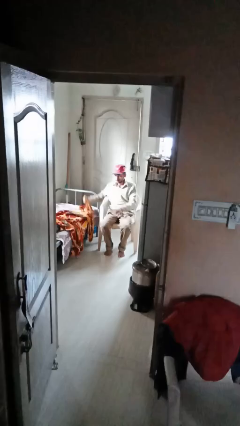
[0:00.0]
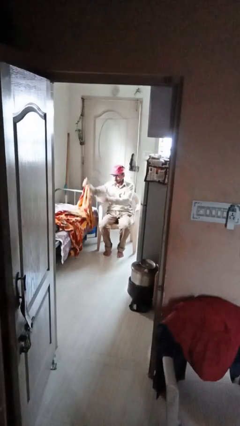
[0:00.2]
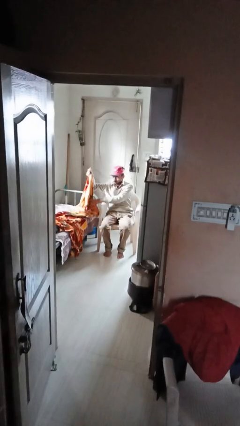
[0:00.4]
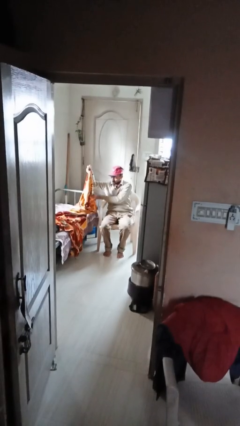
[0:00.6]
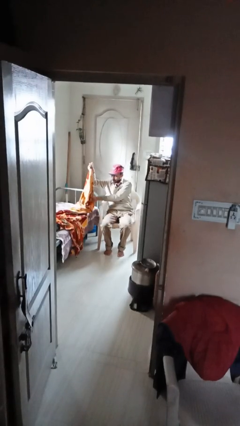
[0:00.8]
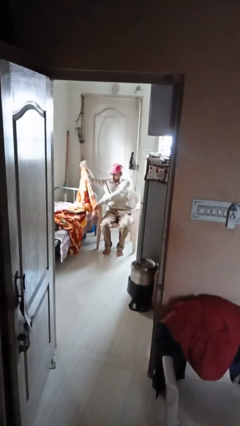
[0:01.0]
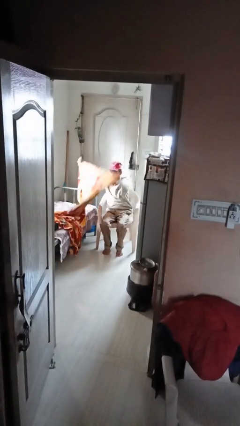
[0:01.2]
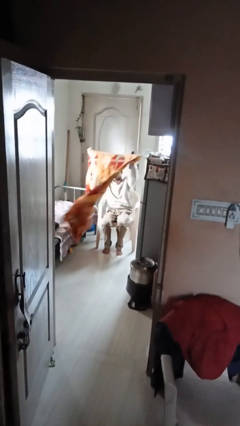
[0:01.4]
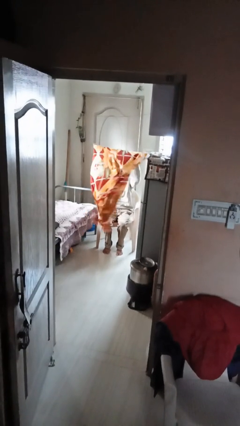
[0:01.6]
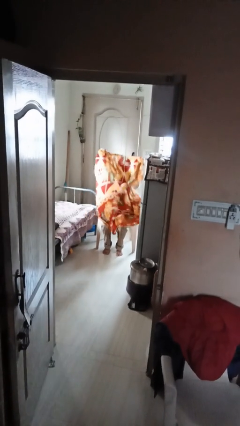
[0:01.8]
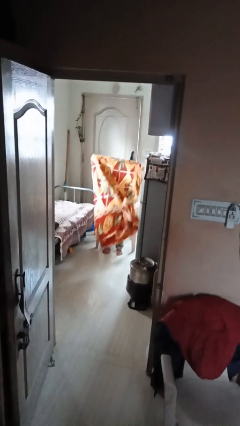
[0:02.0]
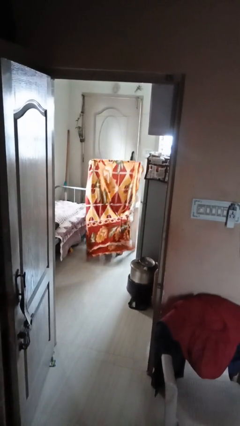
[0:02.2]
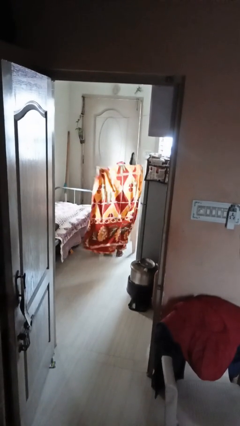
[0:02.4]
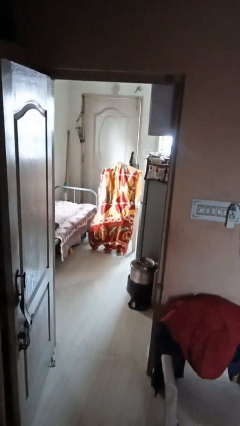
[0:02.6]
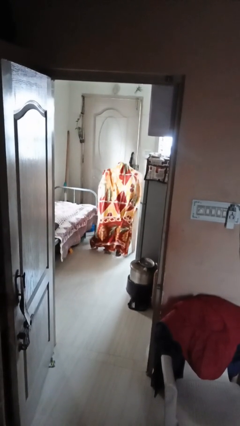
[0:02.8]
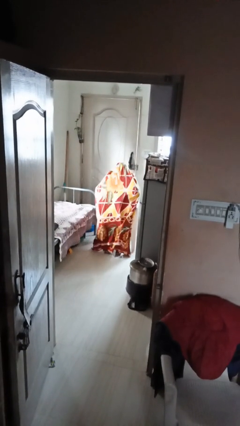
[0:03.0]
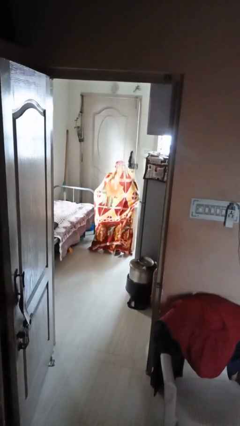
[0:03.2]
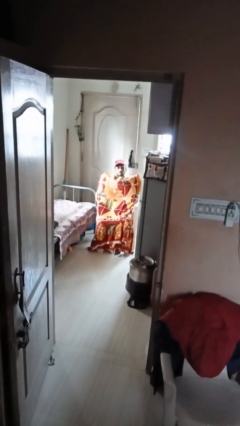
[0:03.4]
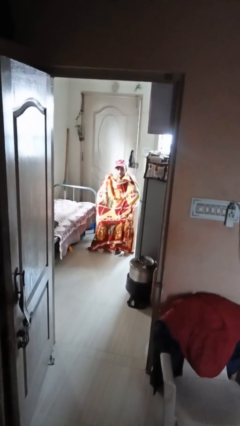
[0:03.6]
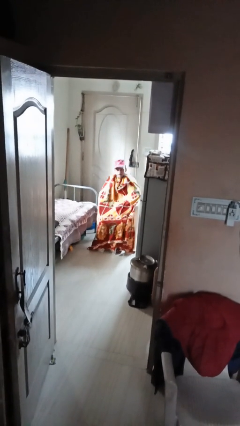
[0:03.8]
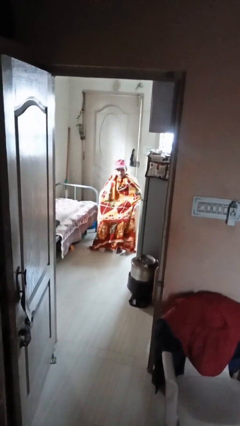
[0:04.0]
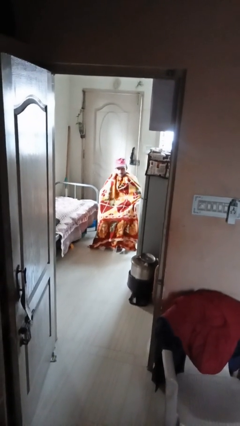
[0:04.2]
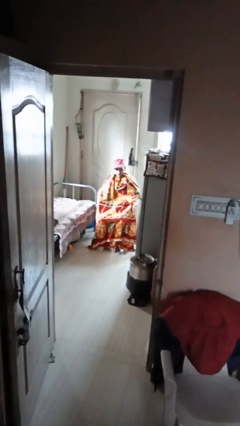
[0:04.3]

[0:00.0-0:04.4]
person covers with blanket

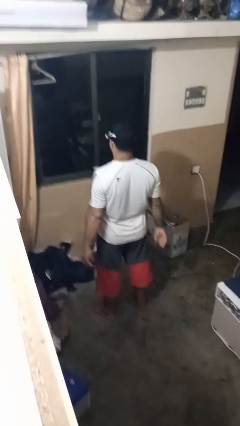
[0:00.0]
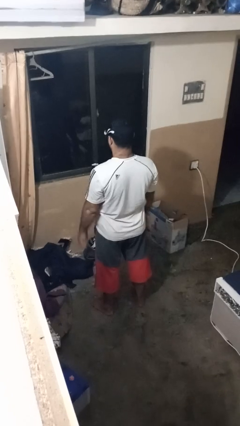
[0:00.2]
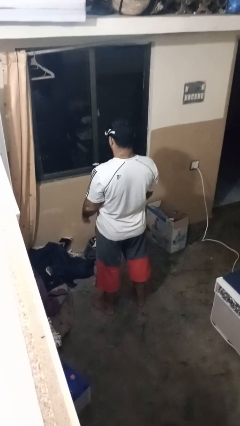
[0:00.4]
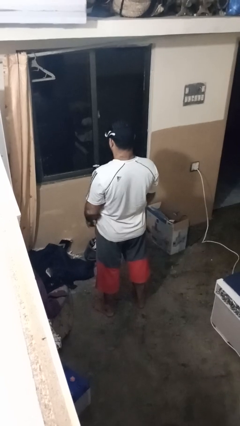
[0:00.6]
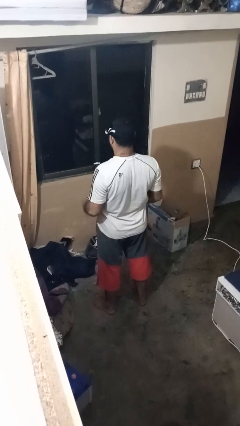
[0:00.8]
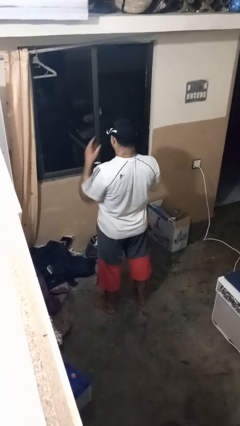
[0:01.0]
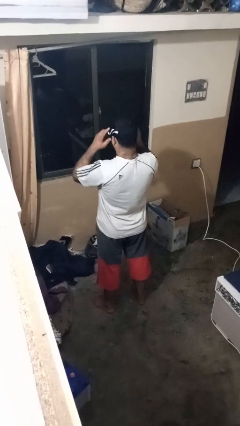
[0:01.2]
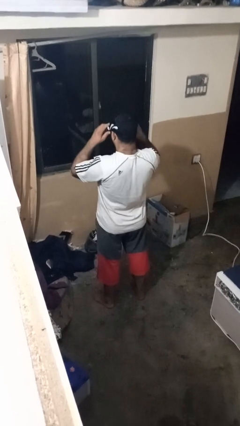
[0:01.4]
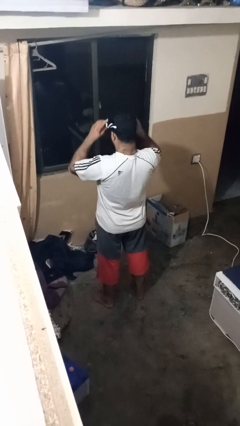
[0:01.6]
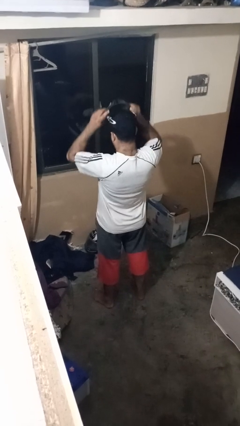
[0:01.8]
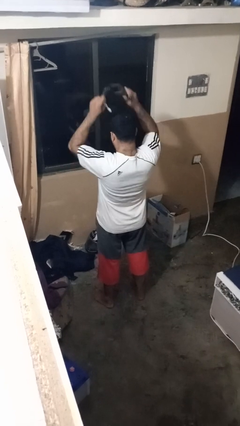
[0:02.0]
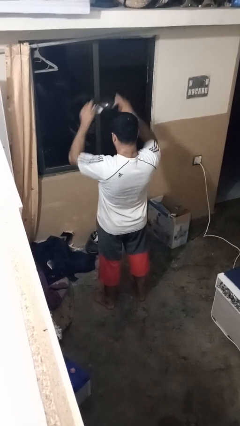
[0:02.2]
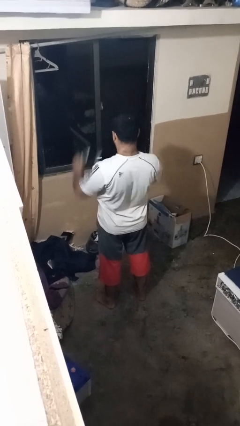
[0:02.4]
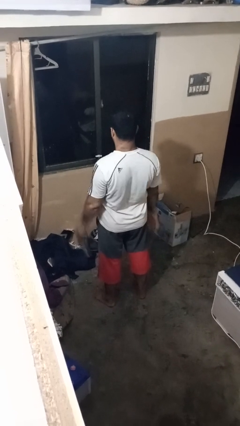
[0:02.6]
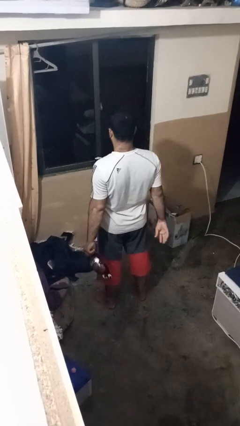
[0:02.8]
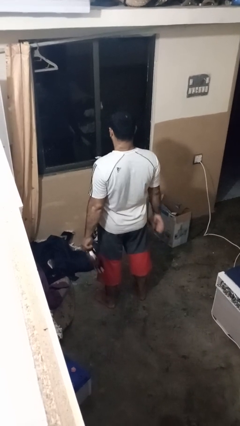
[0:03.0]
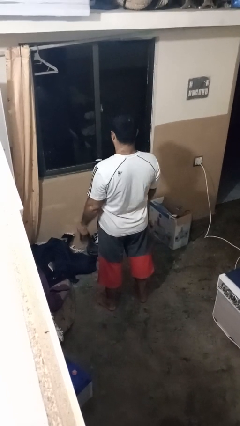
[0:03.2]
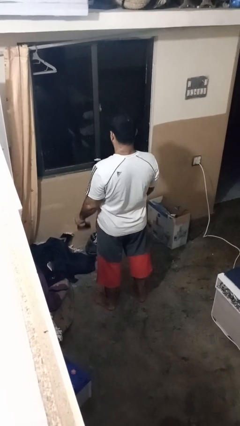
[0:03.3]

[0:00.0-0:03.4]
person takes off sunglasses

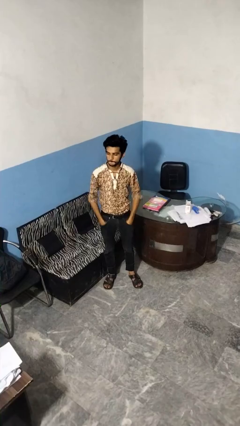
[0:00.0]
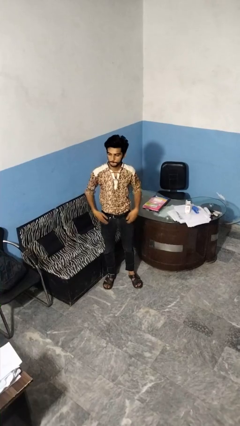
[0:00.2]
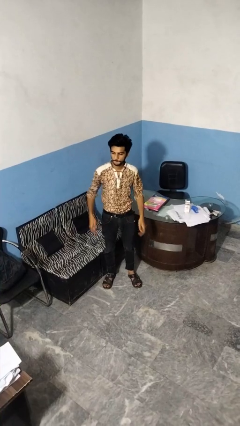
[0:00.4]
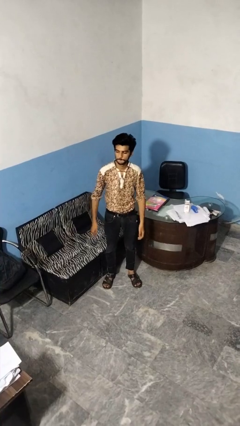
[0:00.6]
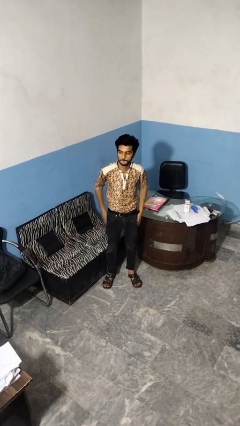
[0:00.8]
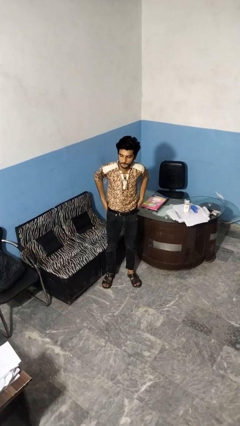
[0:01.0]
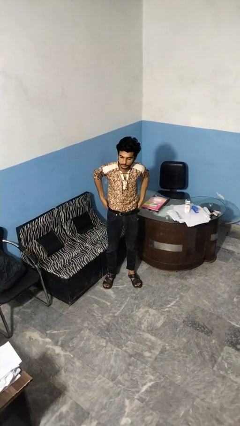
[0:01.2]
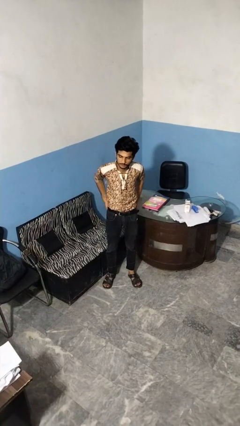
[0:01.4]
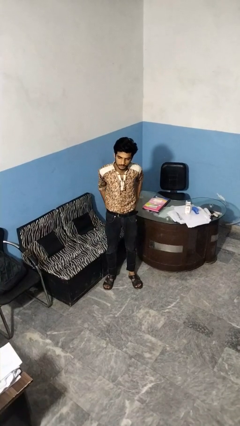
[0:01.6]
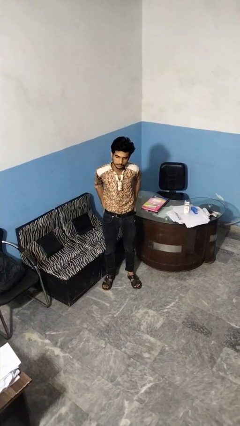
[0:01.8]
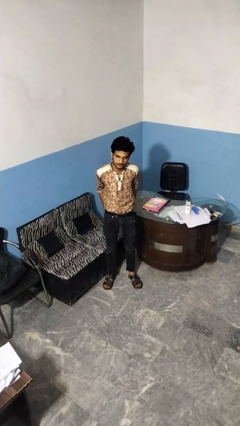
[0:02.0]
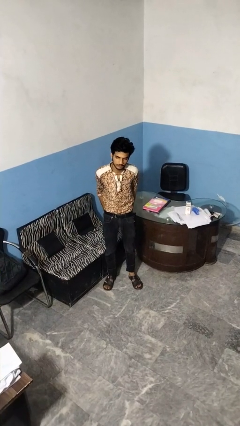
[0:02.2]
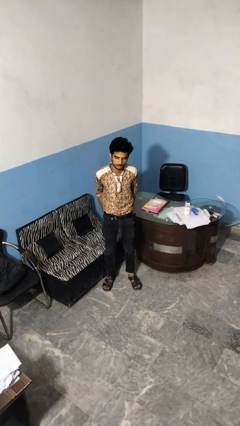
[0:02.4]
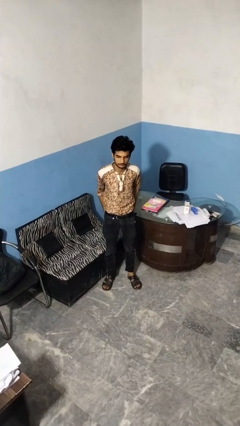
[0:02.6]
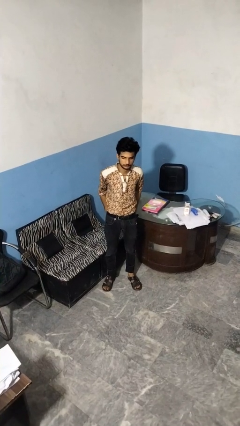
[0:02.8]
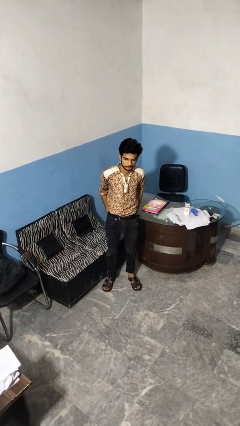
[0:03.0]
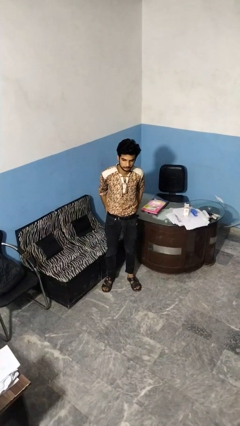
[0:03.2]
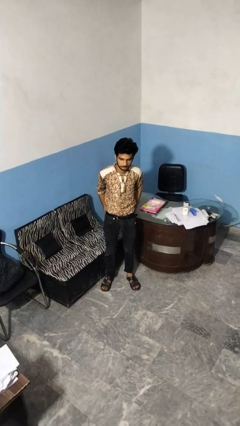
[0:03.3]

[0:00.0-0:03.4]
person puts hands in back pockets

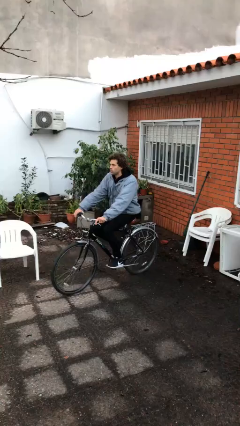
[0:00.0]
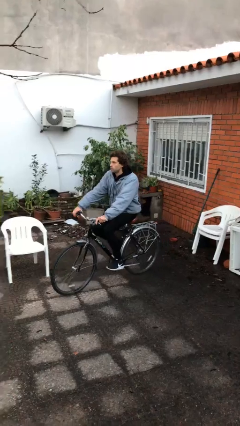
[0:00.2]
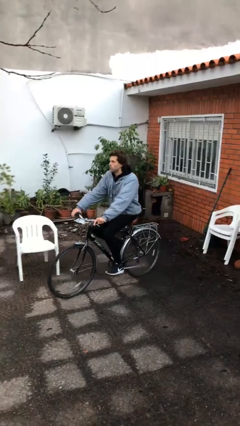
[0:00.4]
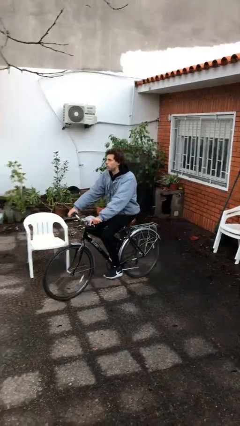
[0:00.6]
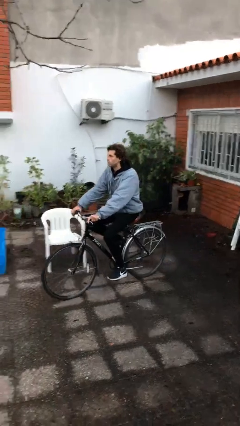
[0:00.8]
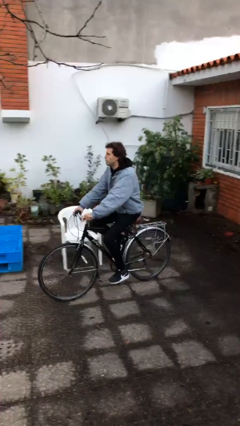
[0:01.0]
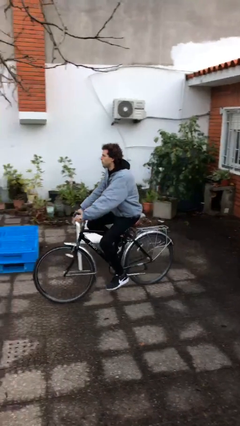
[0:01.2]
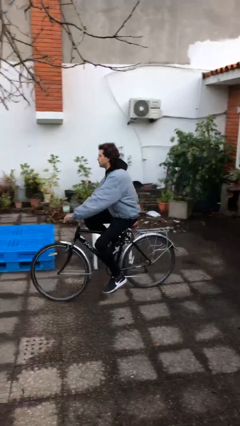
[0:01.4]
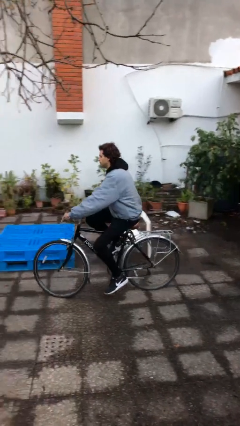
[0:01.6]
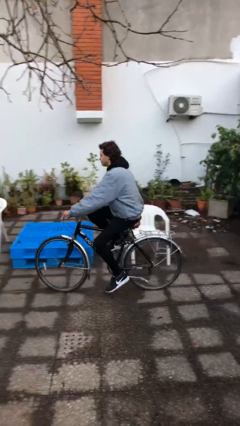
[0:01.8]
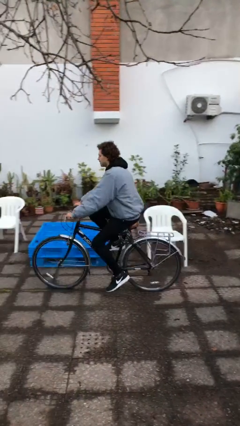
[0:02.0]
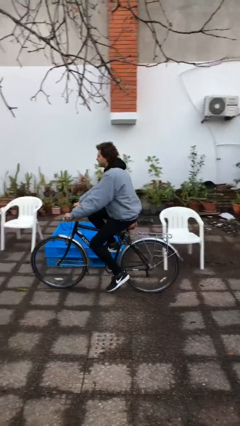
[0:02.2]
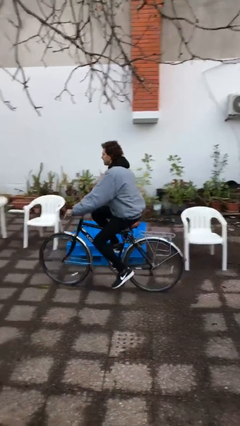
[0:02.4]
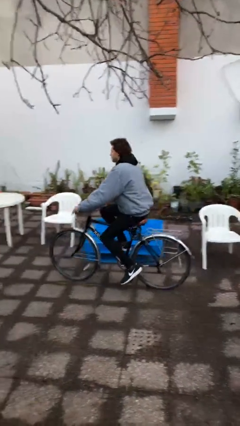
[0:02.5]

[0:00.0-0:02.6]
person rides bicycle

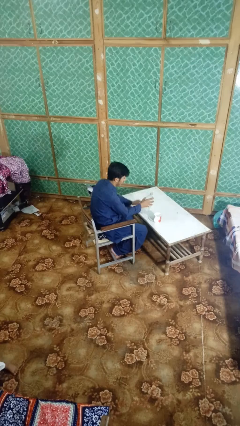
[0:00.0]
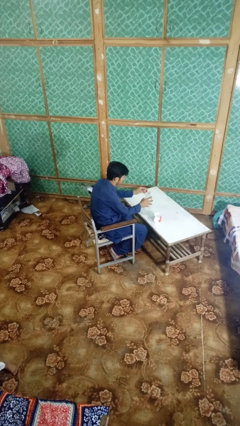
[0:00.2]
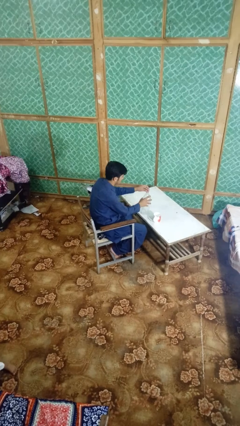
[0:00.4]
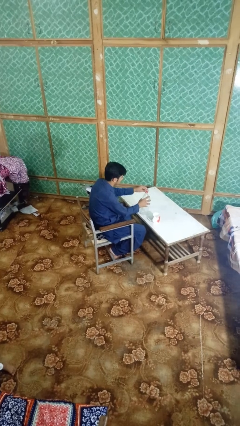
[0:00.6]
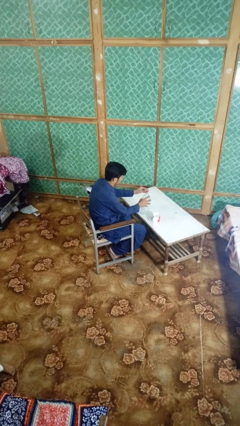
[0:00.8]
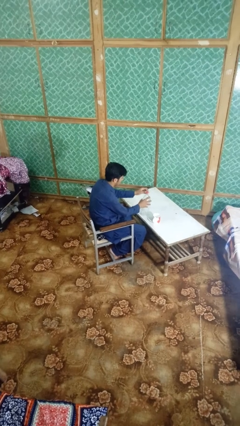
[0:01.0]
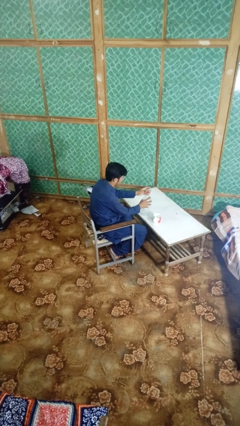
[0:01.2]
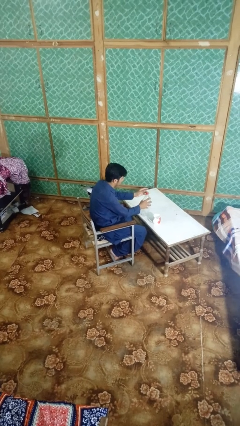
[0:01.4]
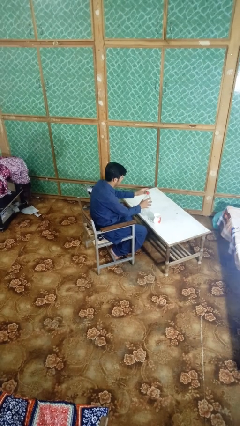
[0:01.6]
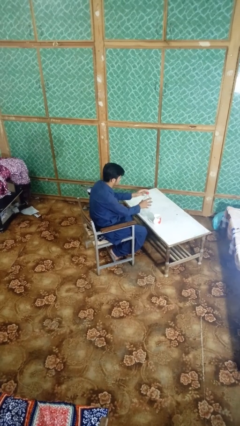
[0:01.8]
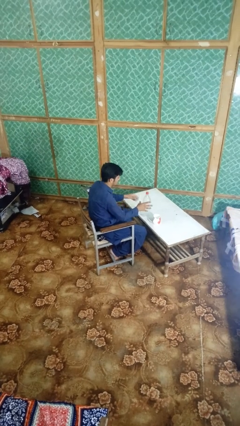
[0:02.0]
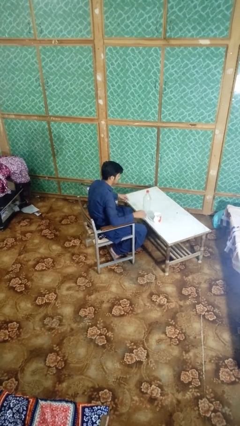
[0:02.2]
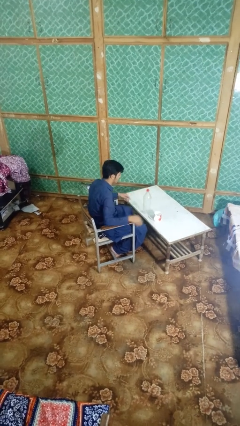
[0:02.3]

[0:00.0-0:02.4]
person screws lid to bottle

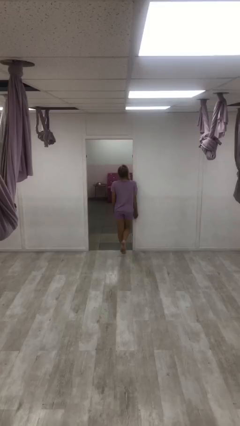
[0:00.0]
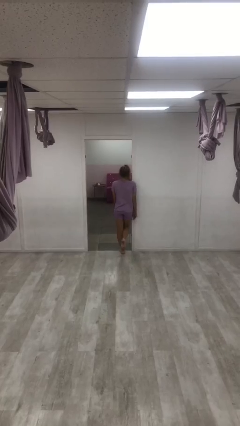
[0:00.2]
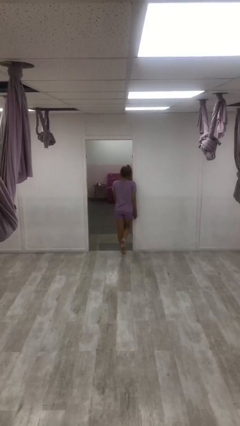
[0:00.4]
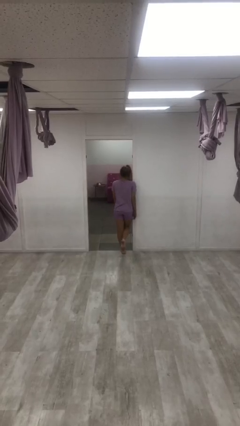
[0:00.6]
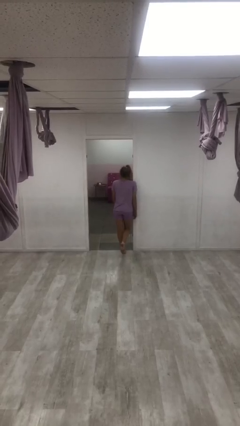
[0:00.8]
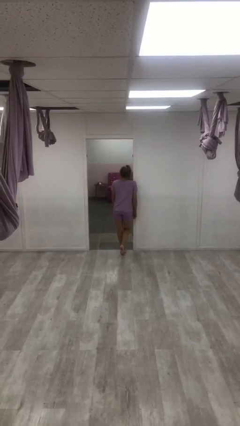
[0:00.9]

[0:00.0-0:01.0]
person bumps into wall

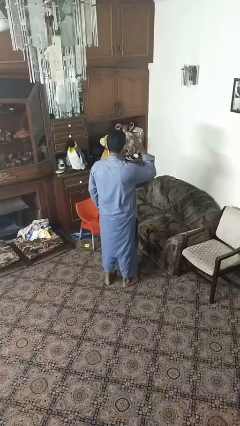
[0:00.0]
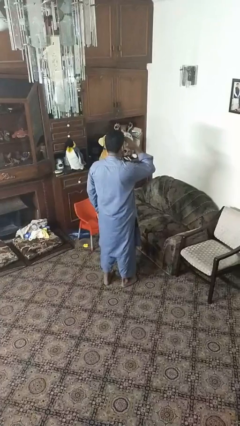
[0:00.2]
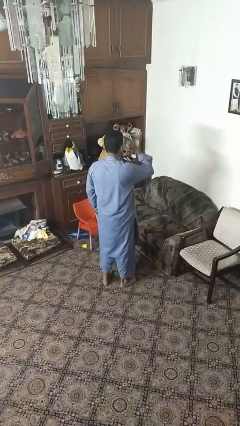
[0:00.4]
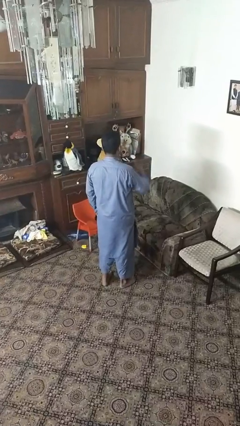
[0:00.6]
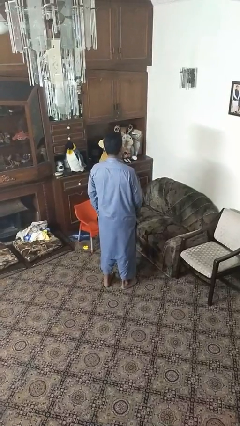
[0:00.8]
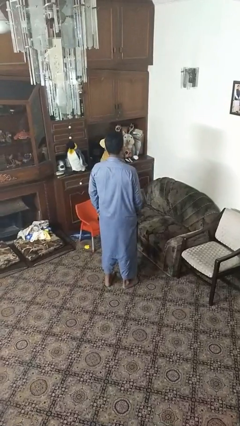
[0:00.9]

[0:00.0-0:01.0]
person salutes
